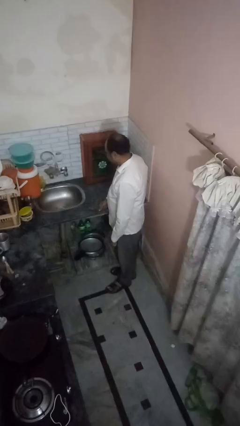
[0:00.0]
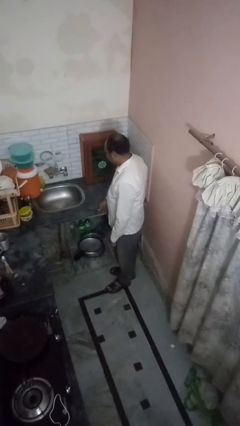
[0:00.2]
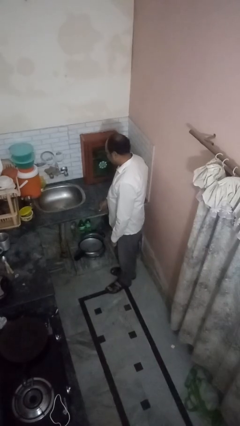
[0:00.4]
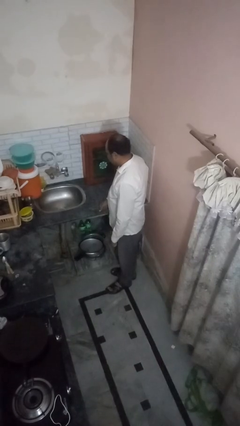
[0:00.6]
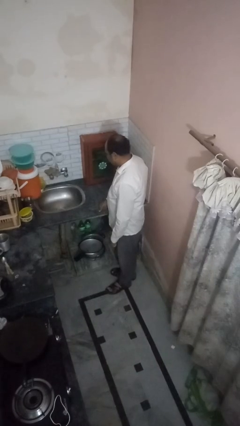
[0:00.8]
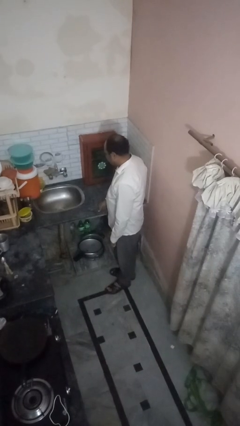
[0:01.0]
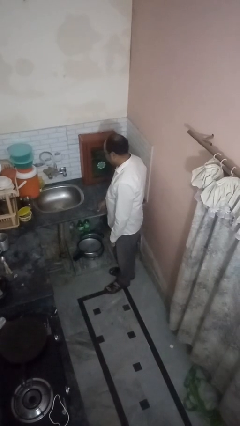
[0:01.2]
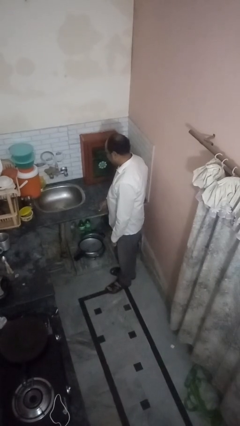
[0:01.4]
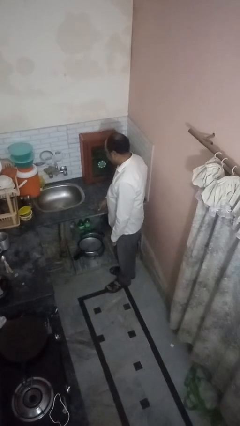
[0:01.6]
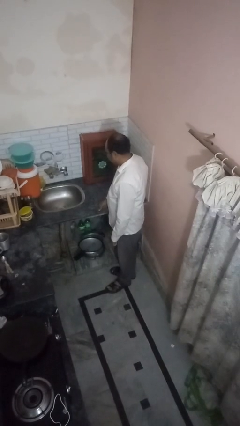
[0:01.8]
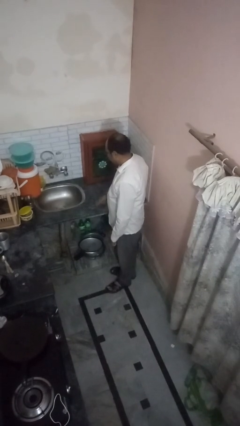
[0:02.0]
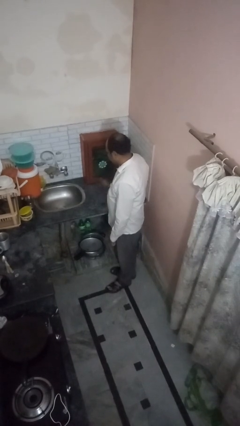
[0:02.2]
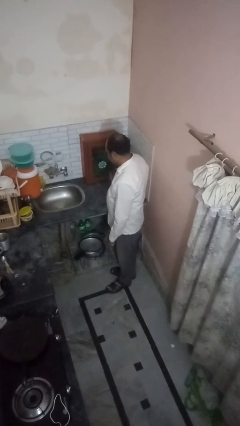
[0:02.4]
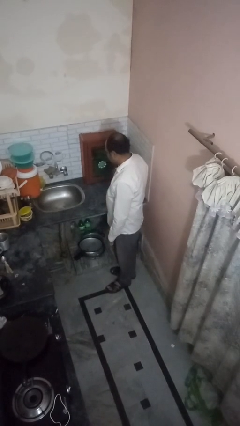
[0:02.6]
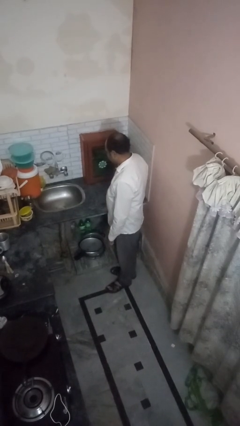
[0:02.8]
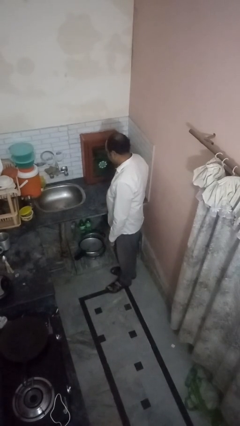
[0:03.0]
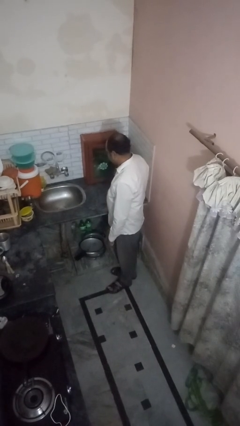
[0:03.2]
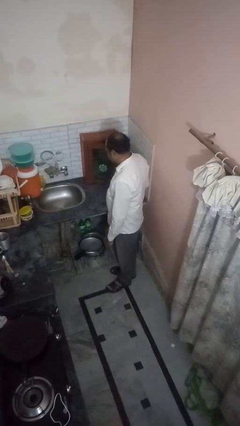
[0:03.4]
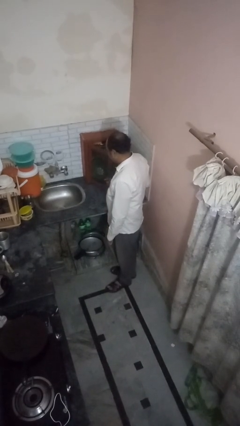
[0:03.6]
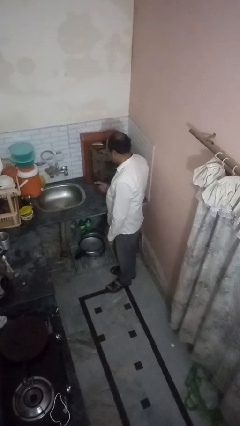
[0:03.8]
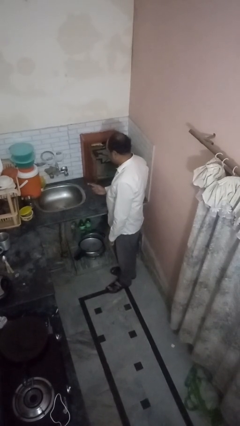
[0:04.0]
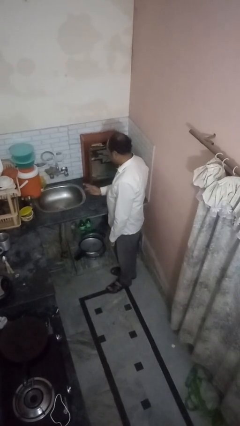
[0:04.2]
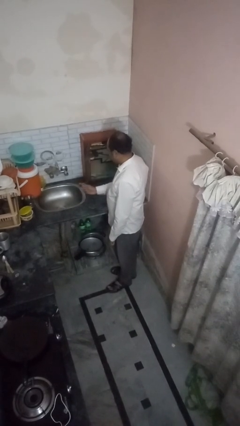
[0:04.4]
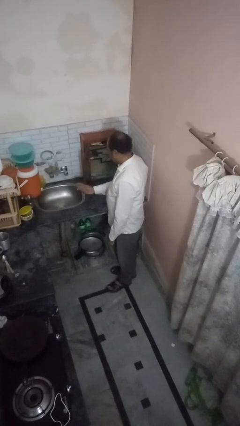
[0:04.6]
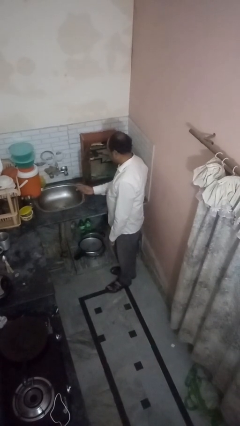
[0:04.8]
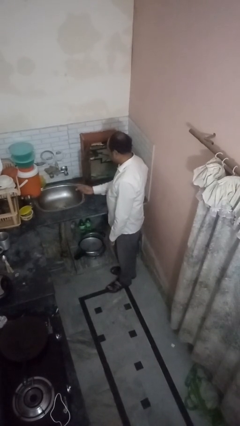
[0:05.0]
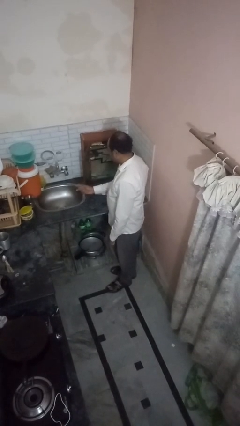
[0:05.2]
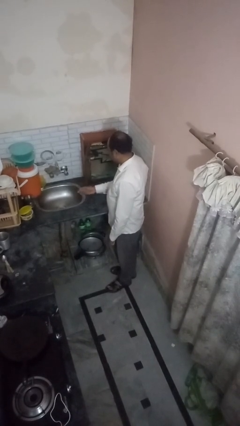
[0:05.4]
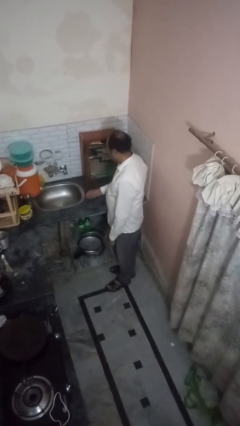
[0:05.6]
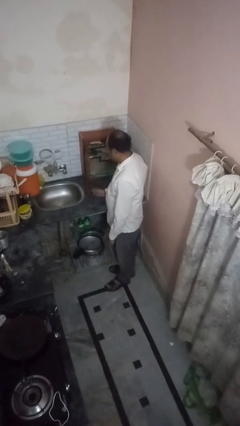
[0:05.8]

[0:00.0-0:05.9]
person opens kitchen drawer

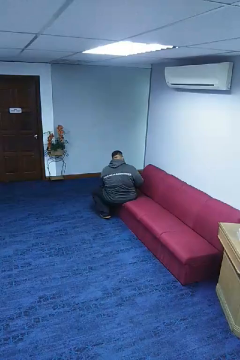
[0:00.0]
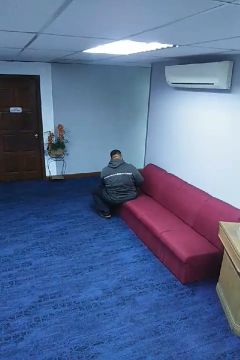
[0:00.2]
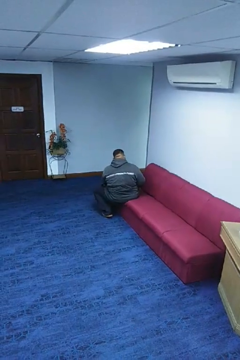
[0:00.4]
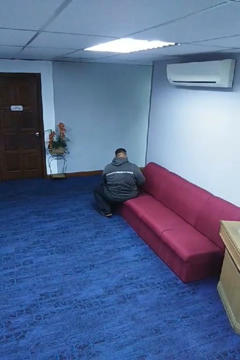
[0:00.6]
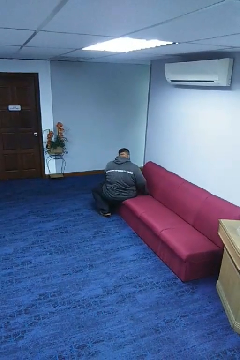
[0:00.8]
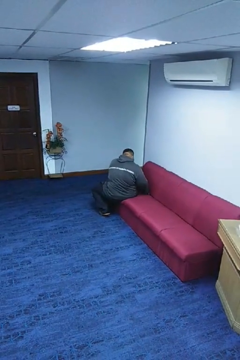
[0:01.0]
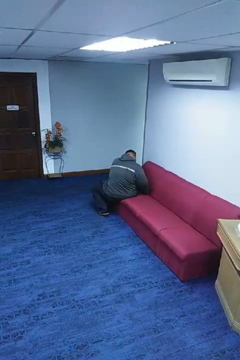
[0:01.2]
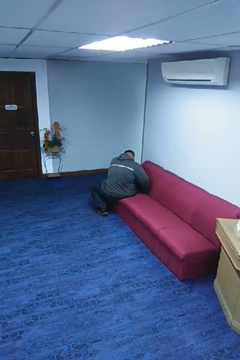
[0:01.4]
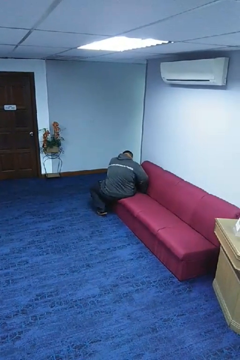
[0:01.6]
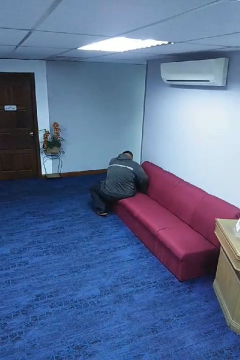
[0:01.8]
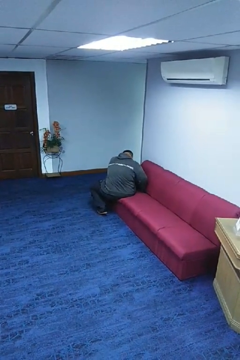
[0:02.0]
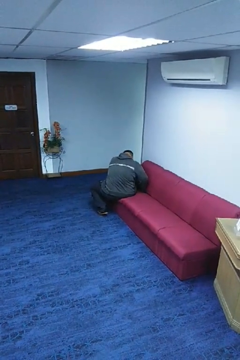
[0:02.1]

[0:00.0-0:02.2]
person searches in couch

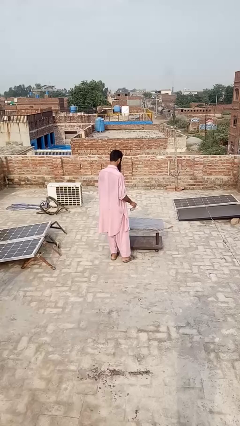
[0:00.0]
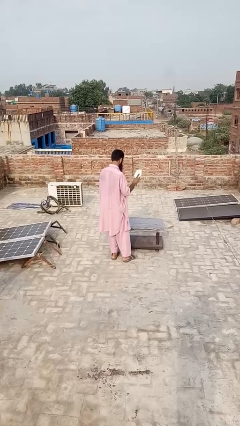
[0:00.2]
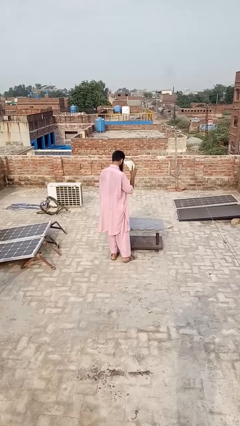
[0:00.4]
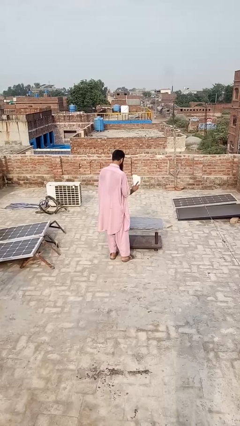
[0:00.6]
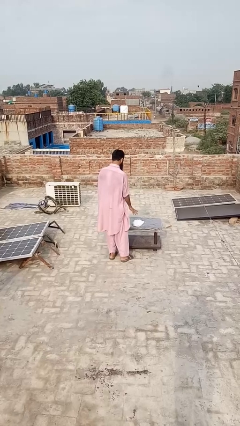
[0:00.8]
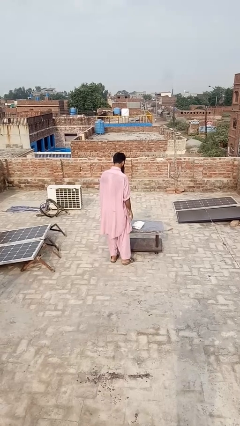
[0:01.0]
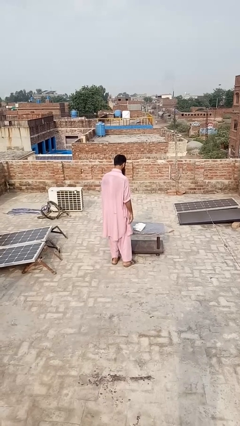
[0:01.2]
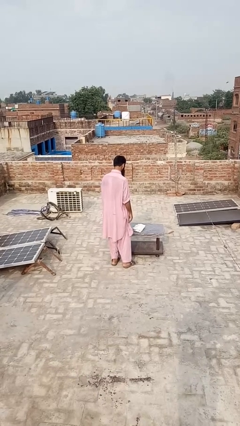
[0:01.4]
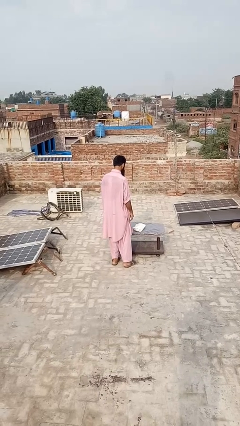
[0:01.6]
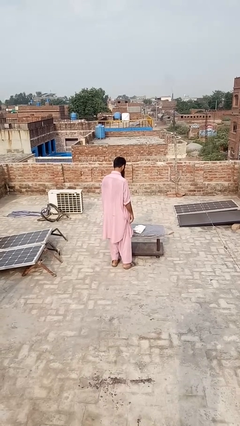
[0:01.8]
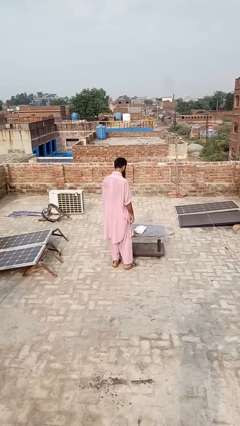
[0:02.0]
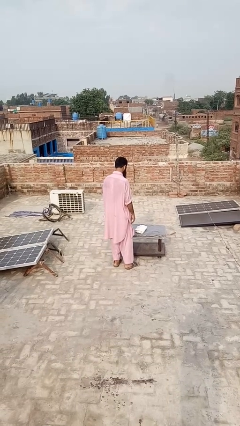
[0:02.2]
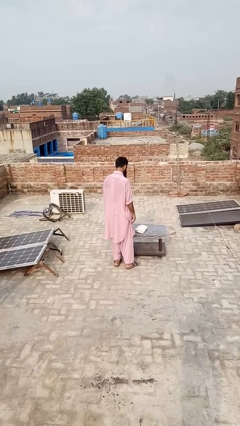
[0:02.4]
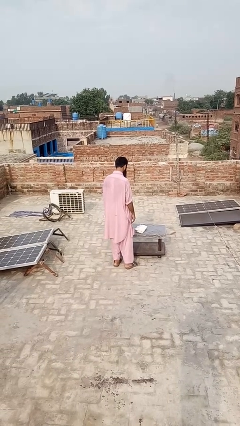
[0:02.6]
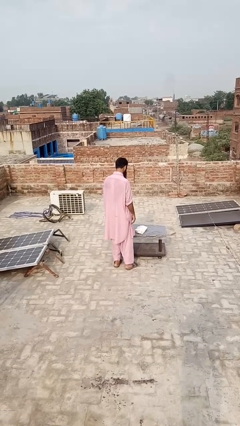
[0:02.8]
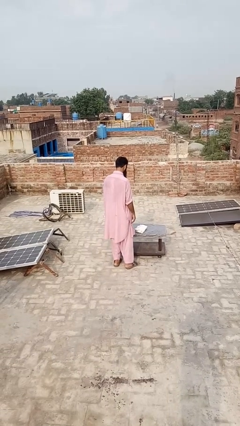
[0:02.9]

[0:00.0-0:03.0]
person throws object on table

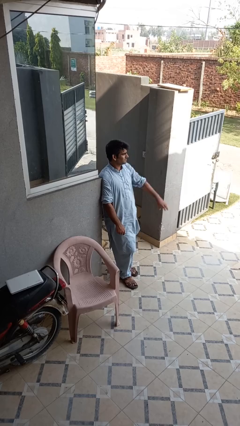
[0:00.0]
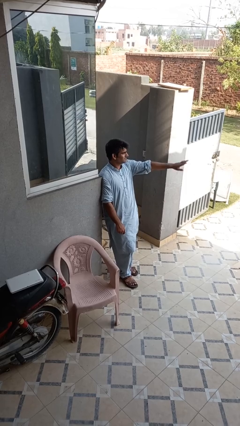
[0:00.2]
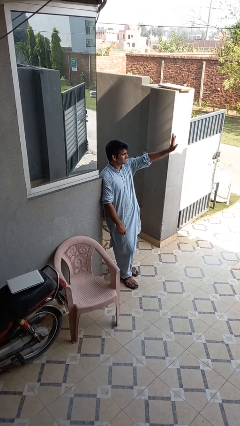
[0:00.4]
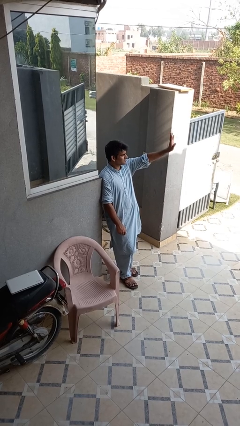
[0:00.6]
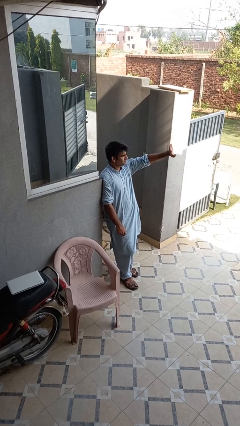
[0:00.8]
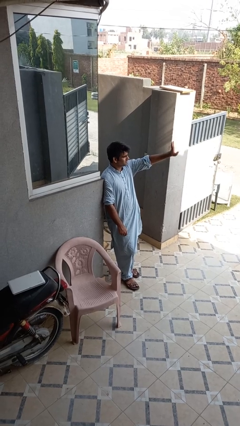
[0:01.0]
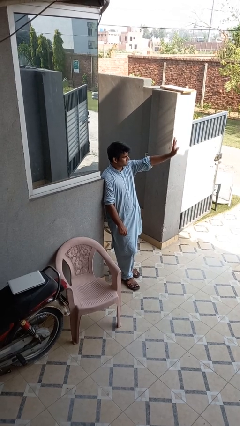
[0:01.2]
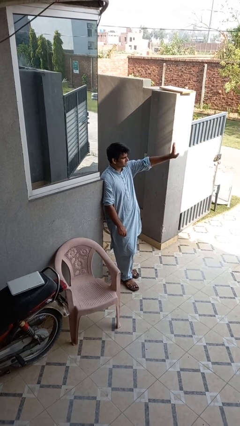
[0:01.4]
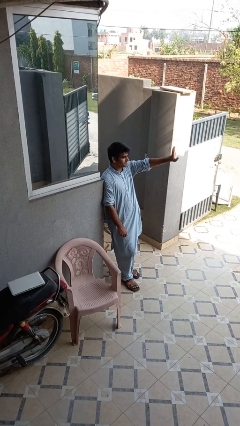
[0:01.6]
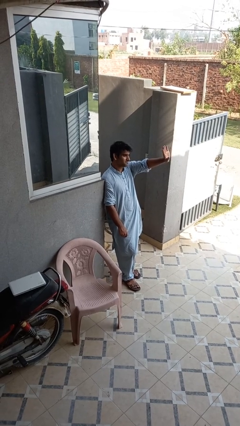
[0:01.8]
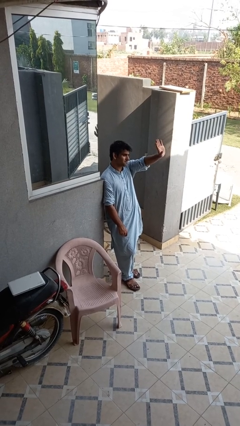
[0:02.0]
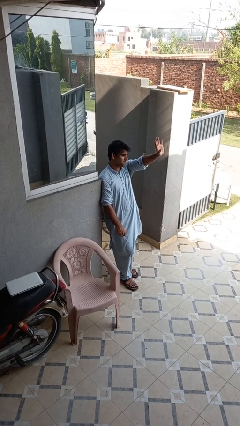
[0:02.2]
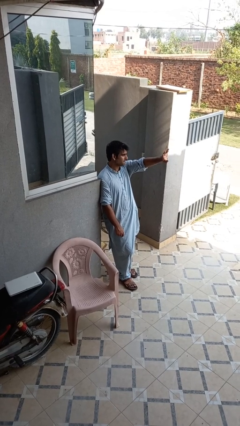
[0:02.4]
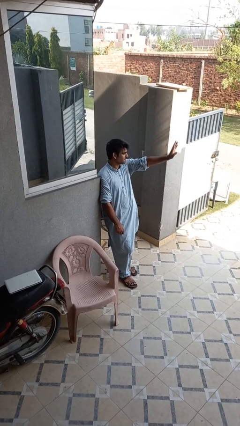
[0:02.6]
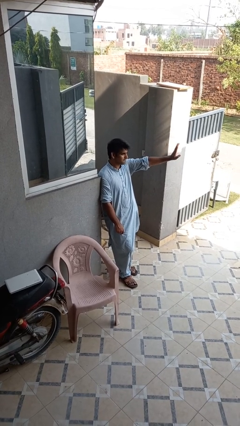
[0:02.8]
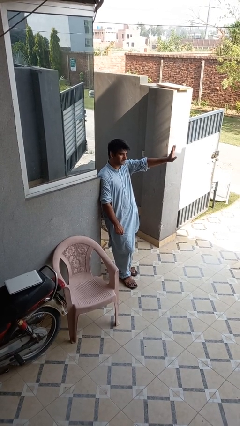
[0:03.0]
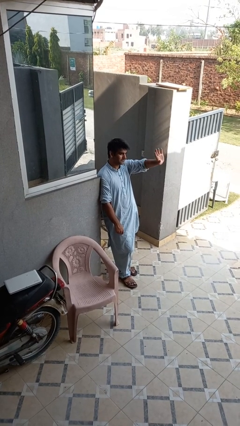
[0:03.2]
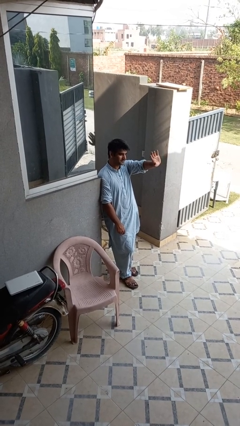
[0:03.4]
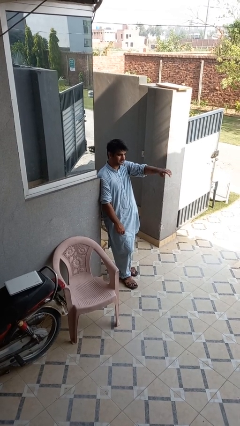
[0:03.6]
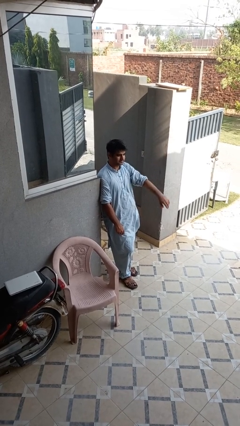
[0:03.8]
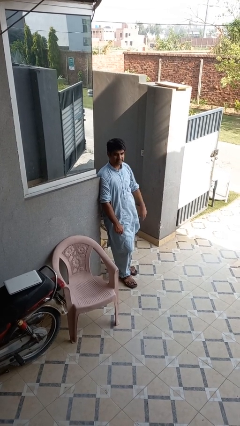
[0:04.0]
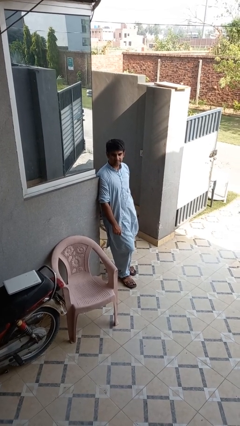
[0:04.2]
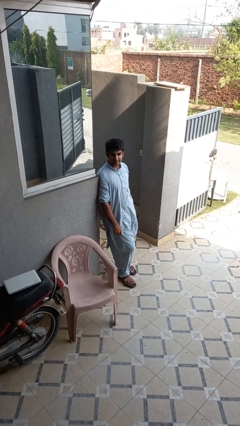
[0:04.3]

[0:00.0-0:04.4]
person waves at person

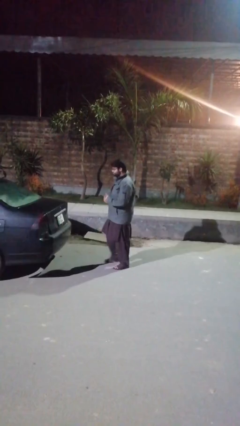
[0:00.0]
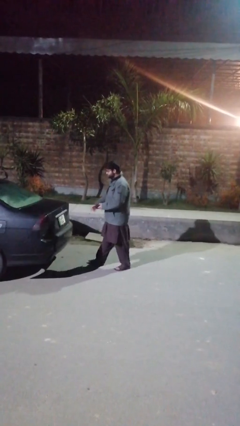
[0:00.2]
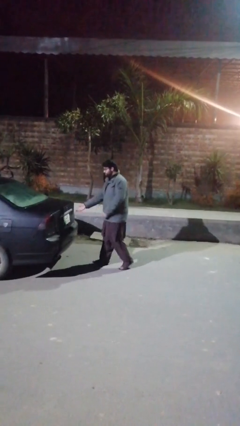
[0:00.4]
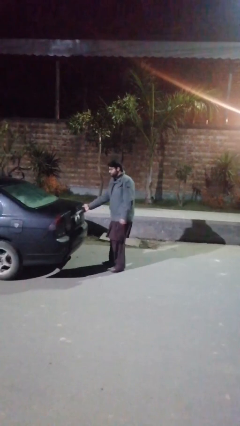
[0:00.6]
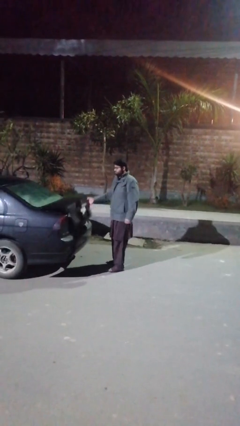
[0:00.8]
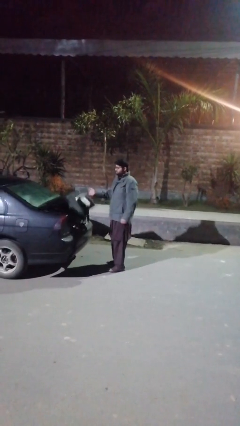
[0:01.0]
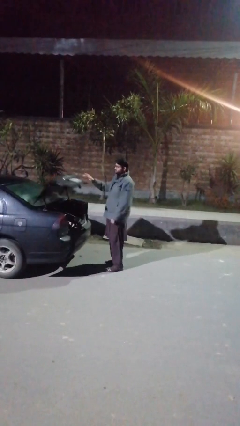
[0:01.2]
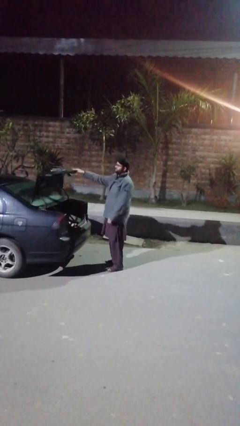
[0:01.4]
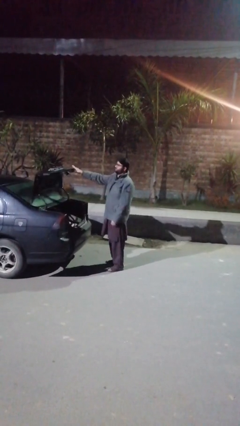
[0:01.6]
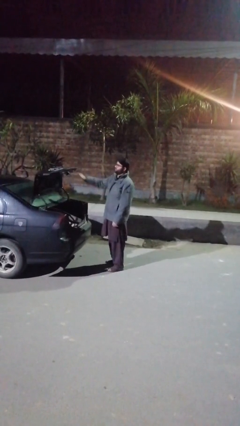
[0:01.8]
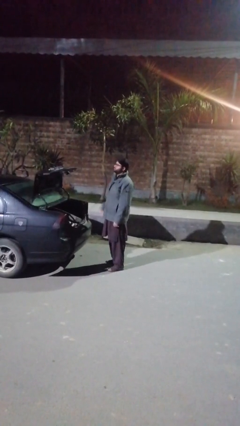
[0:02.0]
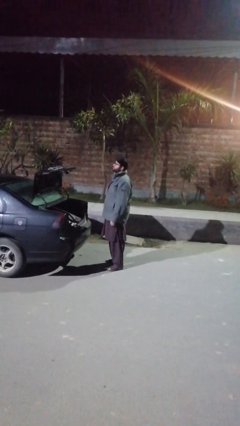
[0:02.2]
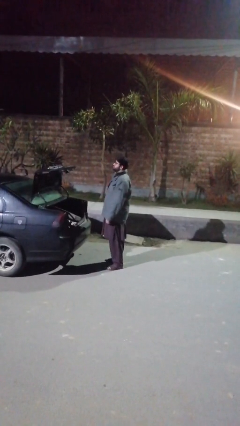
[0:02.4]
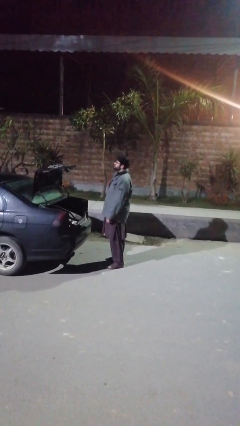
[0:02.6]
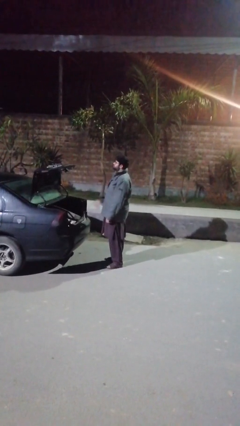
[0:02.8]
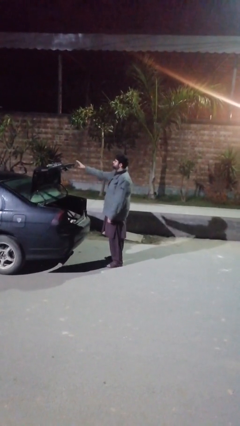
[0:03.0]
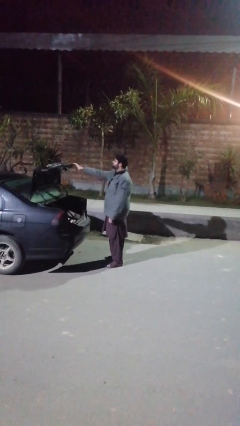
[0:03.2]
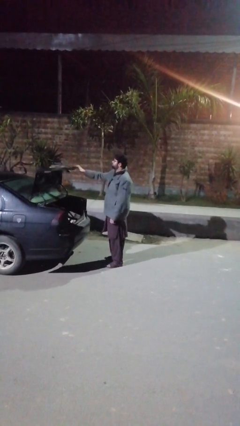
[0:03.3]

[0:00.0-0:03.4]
person closes car trunk
